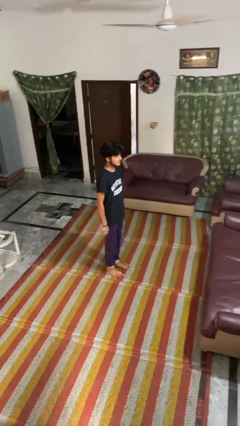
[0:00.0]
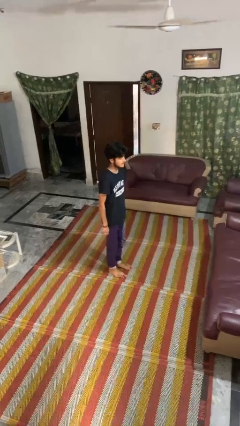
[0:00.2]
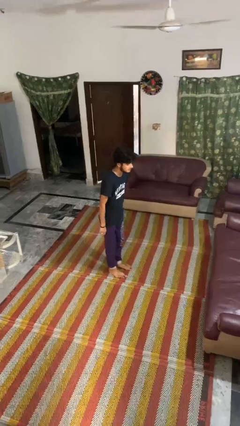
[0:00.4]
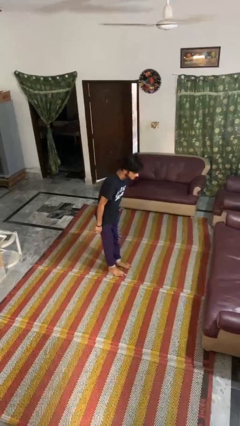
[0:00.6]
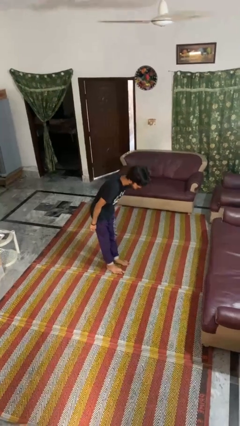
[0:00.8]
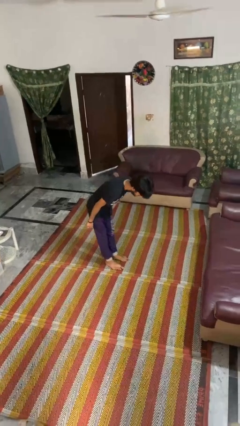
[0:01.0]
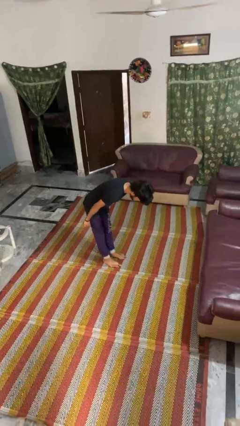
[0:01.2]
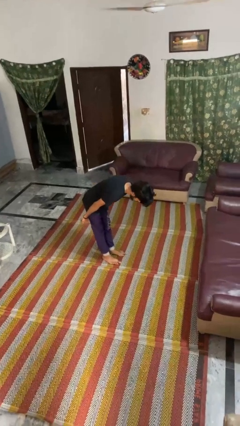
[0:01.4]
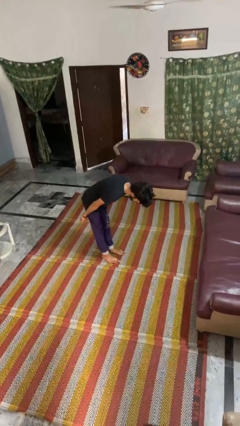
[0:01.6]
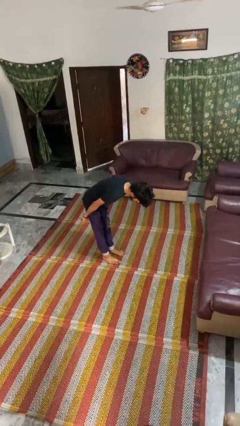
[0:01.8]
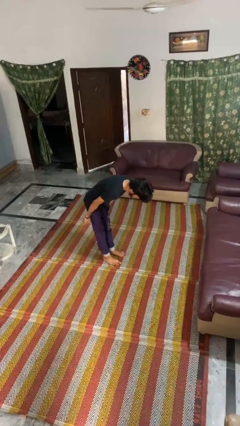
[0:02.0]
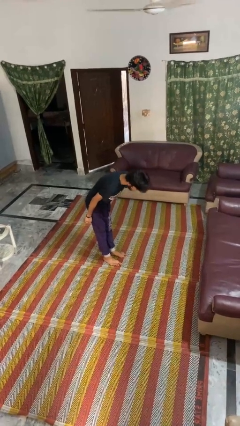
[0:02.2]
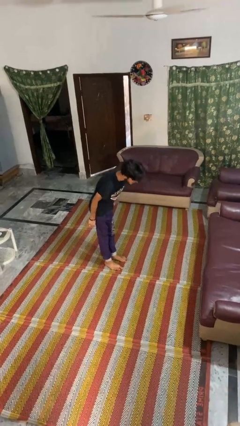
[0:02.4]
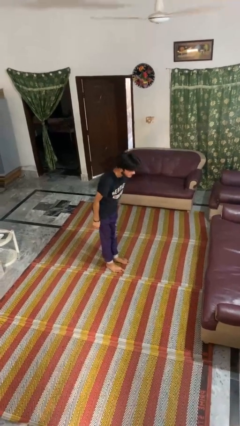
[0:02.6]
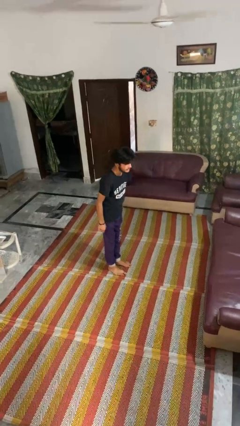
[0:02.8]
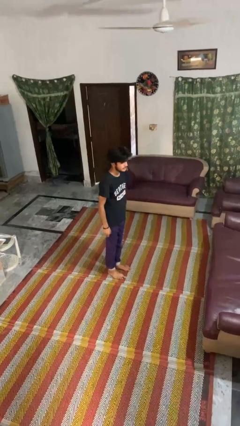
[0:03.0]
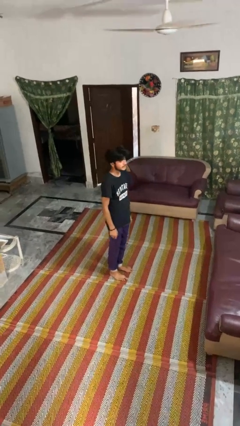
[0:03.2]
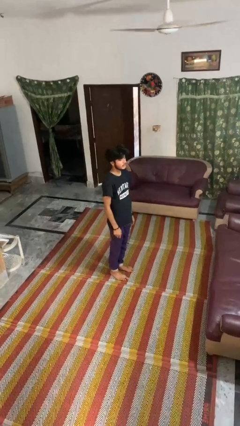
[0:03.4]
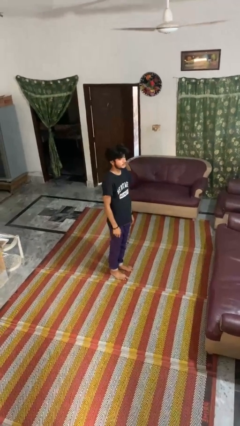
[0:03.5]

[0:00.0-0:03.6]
person bows

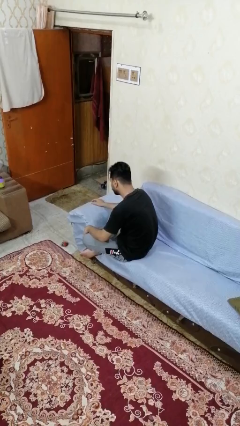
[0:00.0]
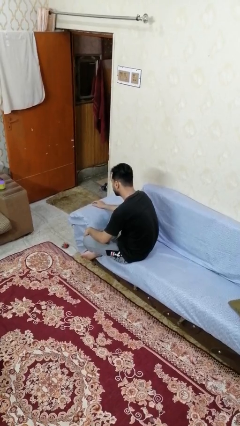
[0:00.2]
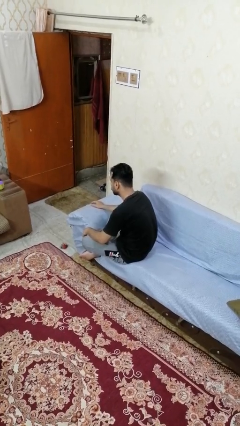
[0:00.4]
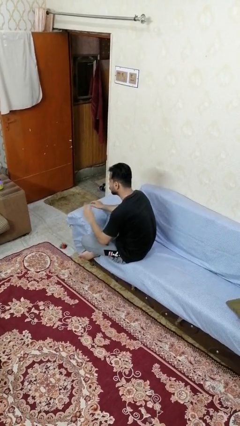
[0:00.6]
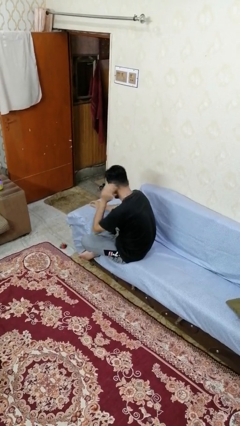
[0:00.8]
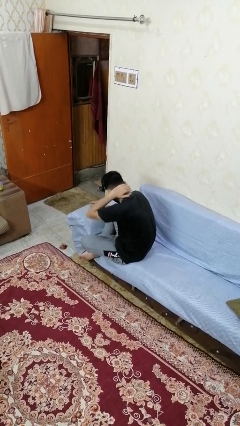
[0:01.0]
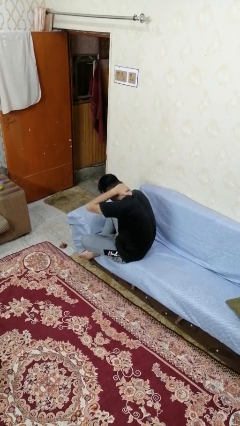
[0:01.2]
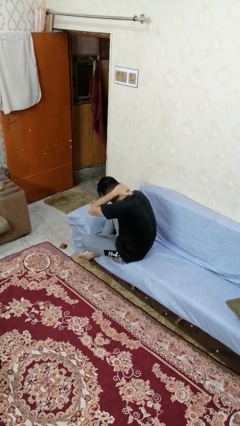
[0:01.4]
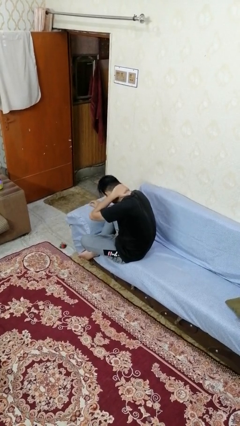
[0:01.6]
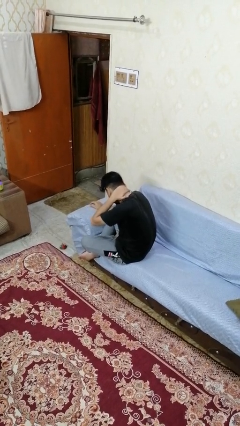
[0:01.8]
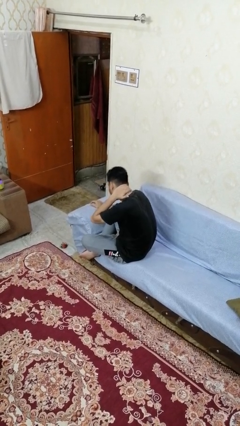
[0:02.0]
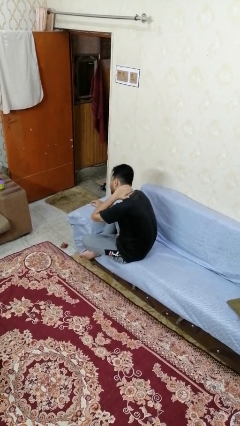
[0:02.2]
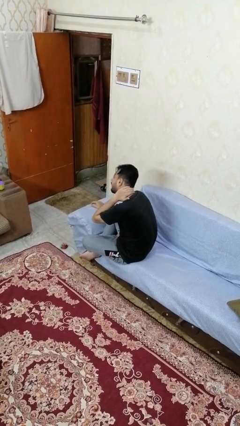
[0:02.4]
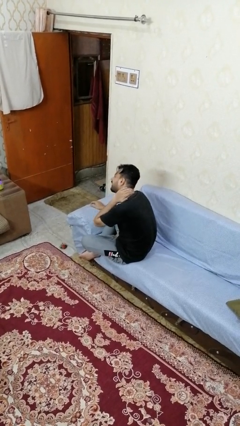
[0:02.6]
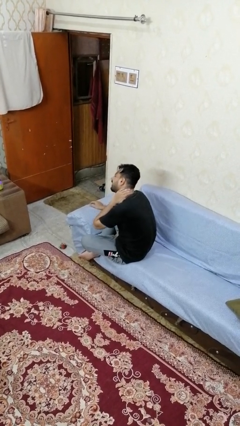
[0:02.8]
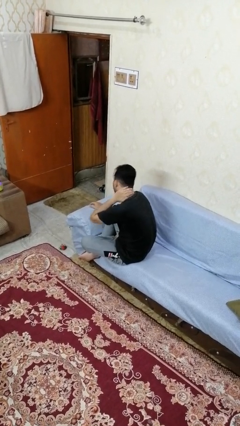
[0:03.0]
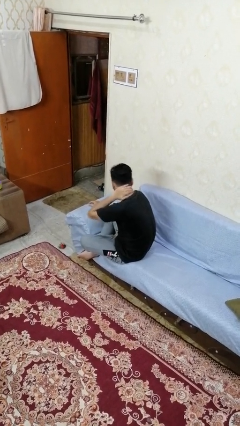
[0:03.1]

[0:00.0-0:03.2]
person rubs neck

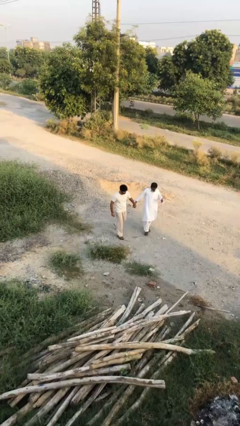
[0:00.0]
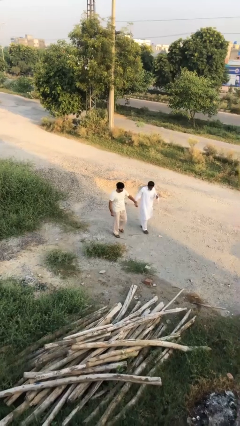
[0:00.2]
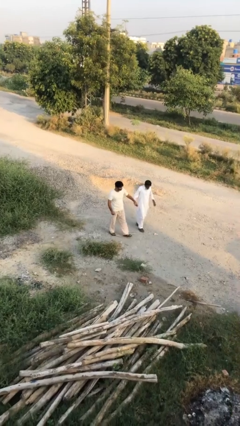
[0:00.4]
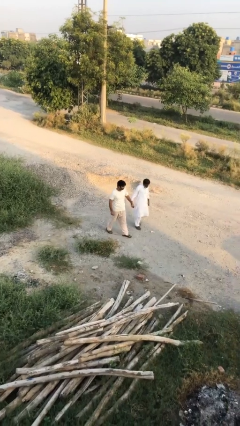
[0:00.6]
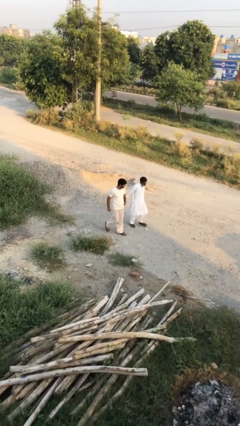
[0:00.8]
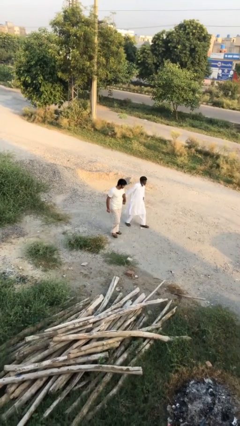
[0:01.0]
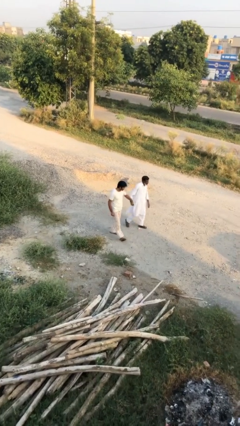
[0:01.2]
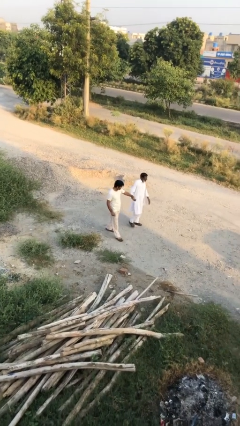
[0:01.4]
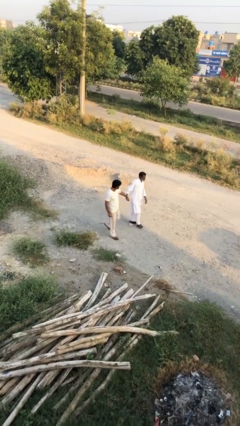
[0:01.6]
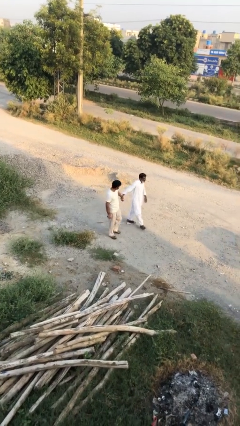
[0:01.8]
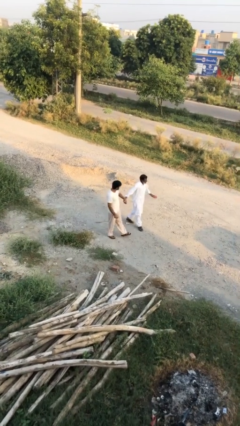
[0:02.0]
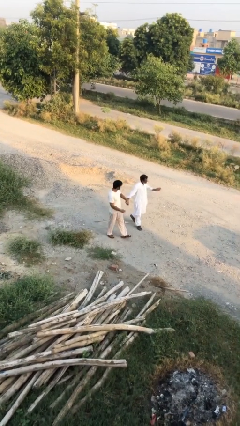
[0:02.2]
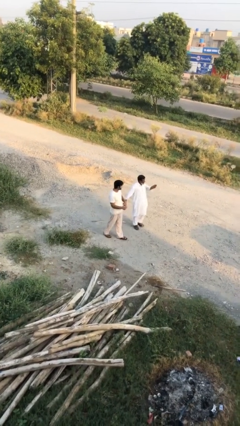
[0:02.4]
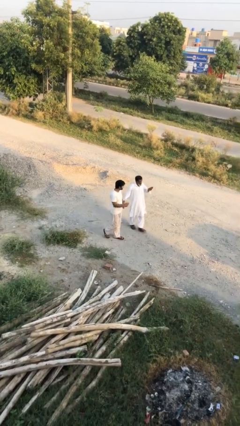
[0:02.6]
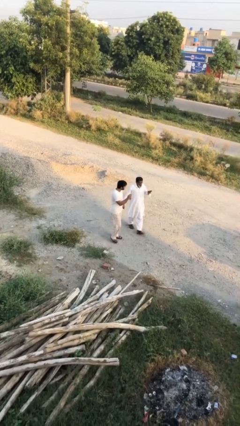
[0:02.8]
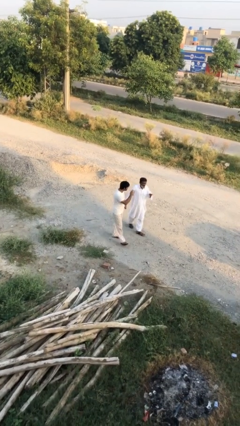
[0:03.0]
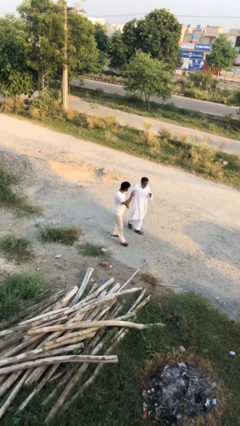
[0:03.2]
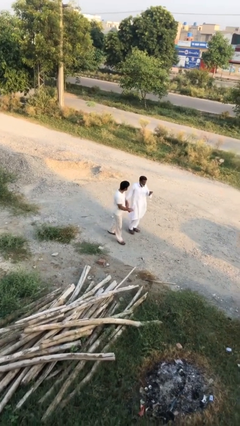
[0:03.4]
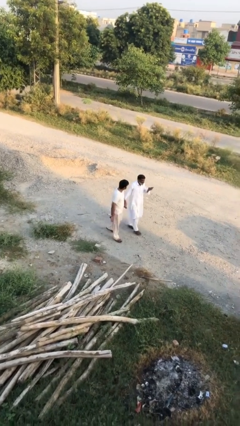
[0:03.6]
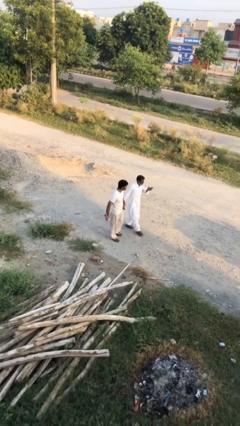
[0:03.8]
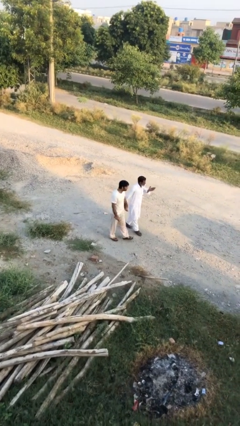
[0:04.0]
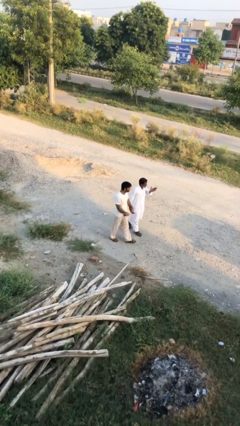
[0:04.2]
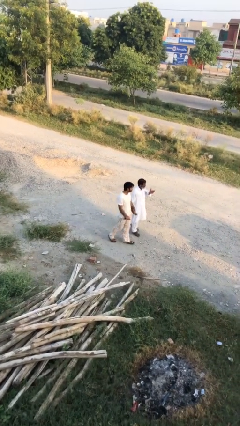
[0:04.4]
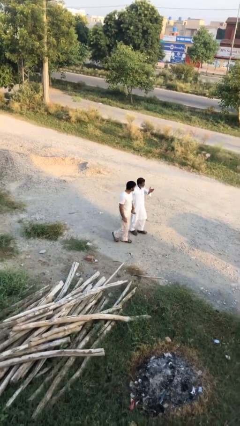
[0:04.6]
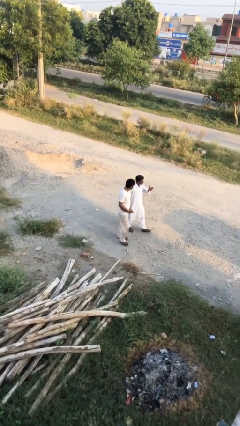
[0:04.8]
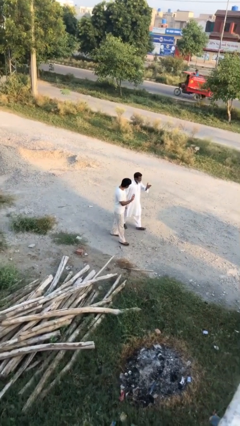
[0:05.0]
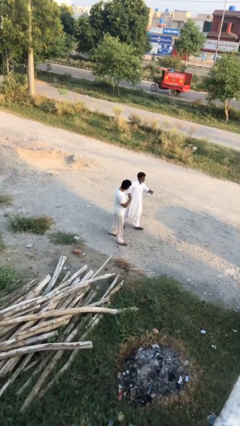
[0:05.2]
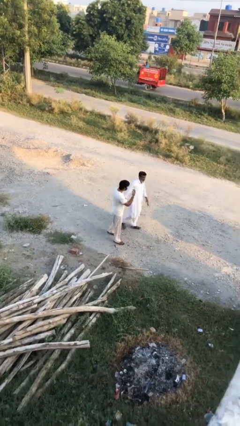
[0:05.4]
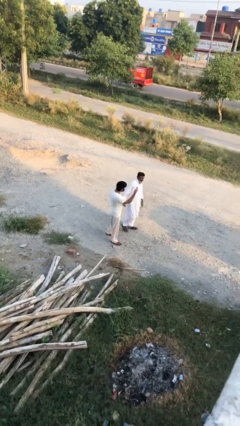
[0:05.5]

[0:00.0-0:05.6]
person holds hand

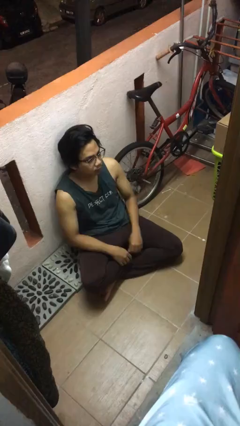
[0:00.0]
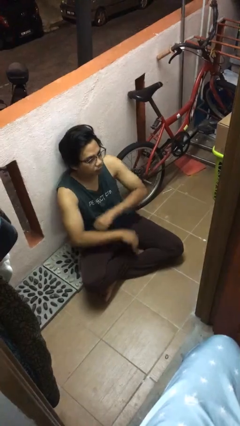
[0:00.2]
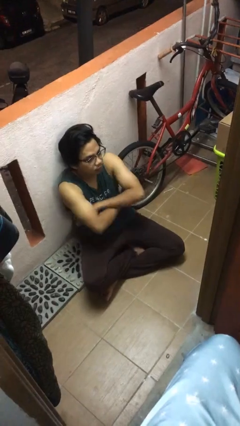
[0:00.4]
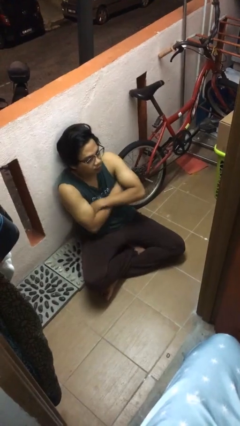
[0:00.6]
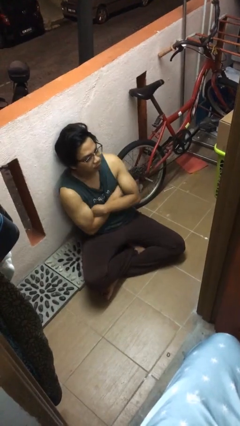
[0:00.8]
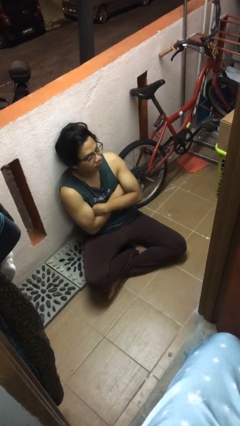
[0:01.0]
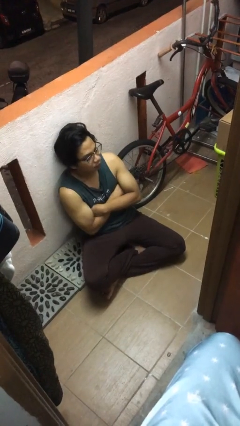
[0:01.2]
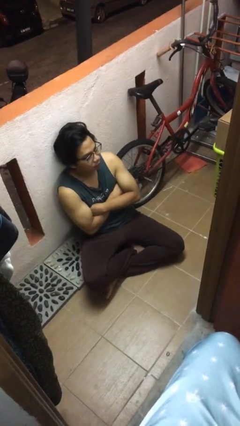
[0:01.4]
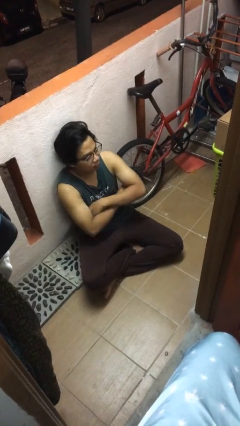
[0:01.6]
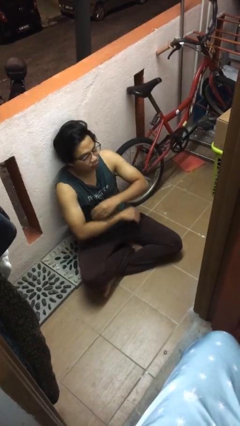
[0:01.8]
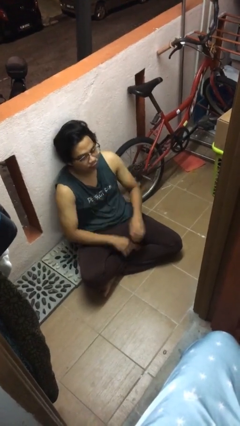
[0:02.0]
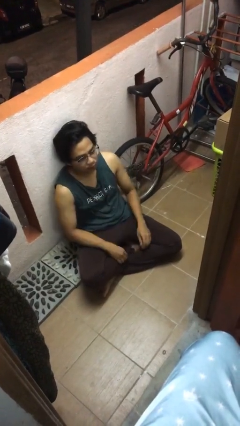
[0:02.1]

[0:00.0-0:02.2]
person grabs person by forearm

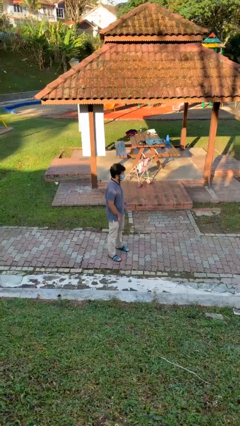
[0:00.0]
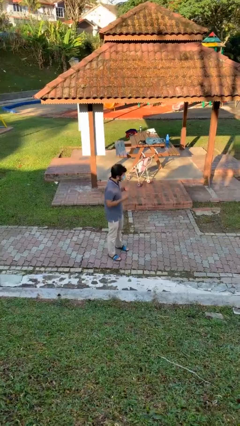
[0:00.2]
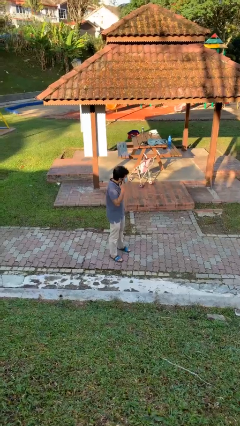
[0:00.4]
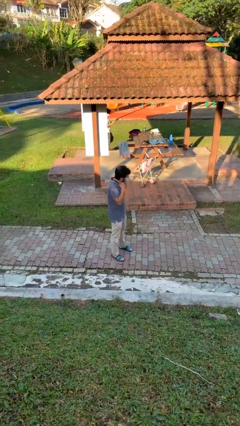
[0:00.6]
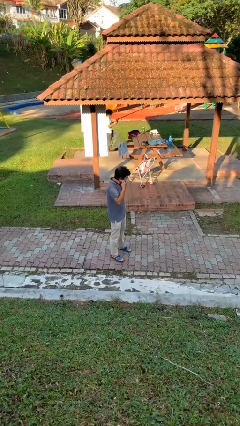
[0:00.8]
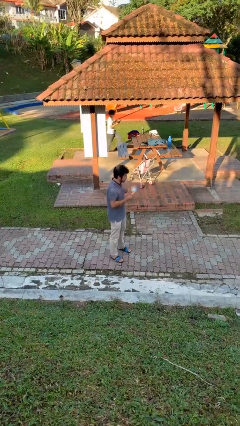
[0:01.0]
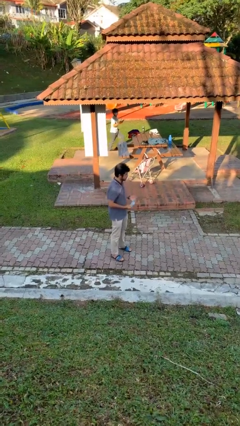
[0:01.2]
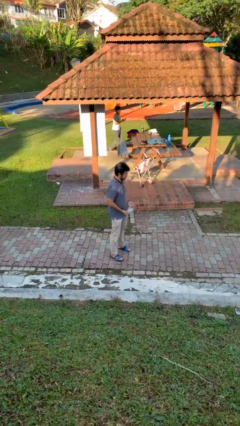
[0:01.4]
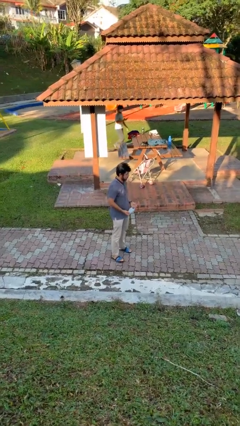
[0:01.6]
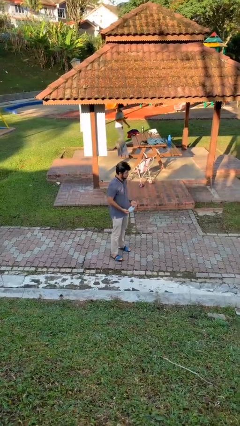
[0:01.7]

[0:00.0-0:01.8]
person takes off facemask

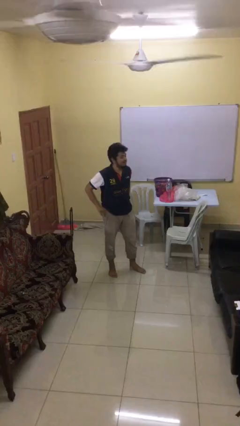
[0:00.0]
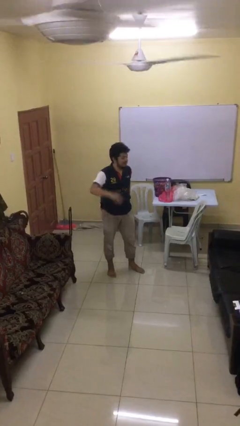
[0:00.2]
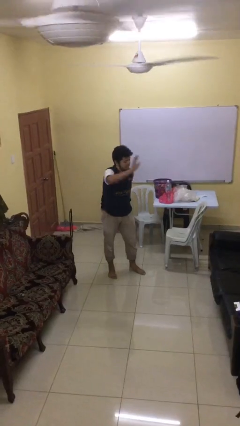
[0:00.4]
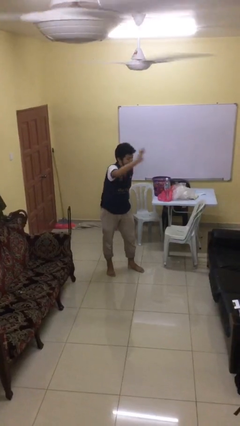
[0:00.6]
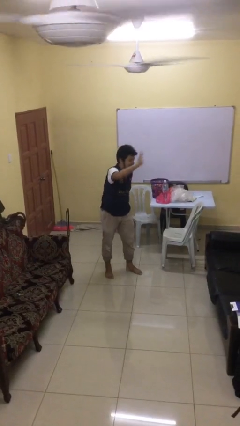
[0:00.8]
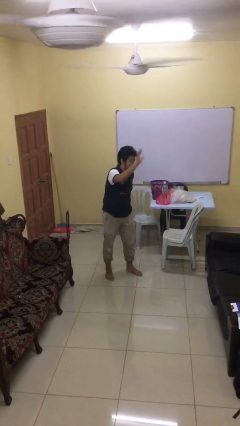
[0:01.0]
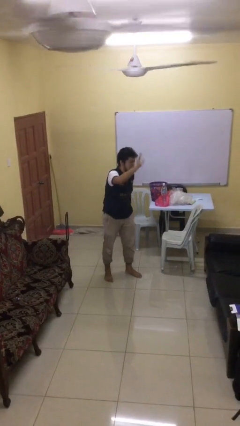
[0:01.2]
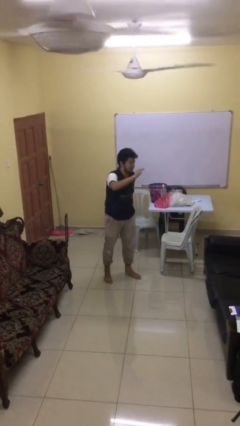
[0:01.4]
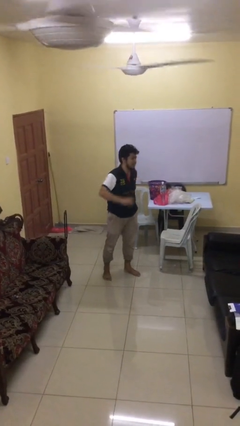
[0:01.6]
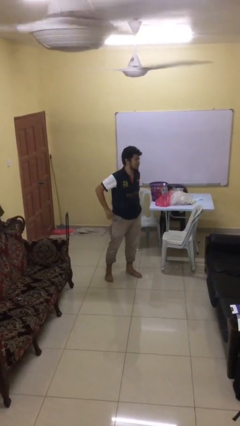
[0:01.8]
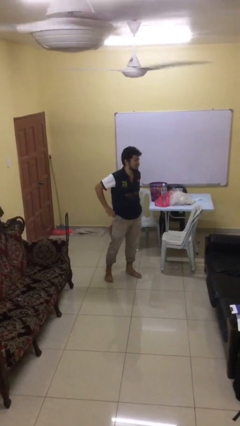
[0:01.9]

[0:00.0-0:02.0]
person waves at person
